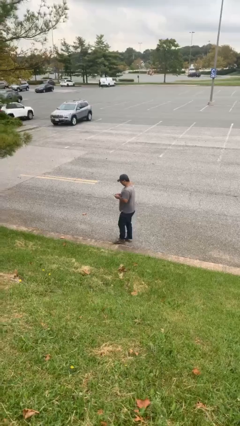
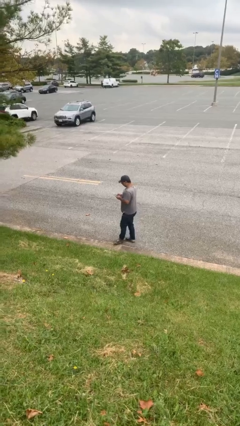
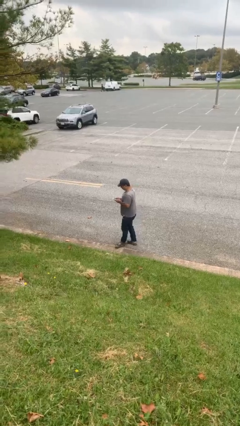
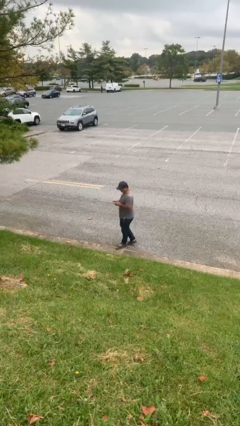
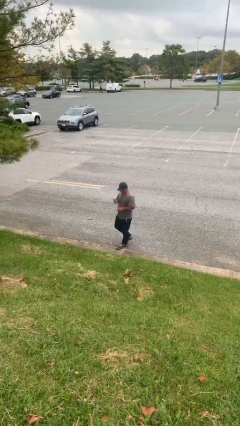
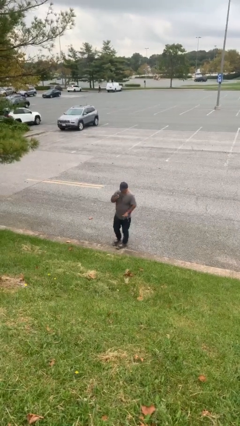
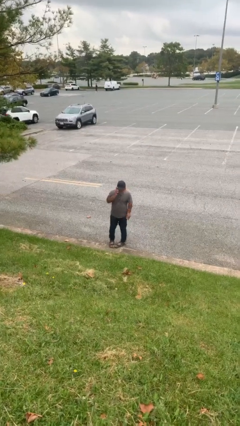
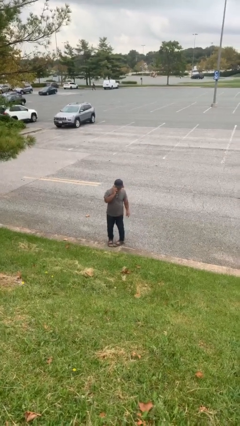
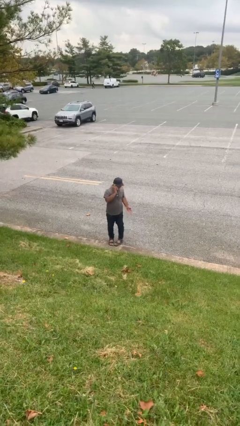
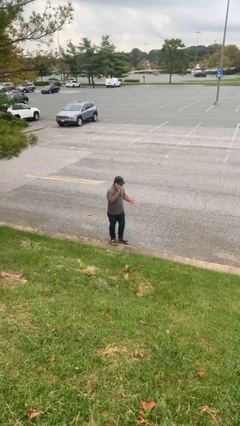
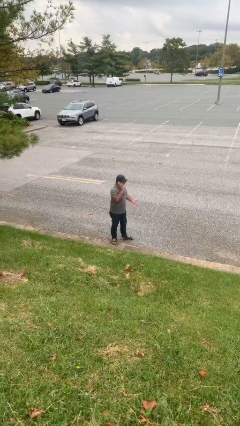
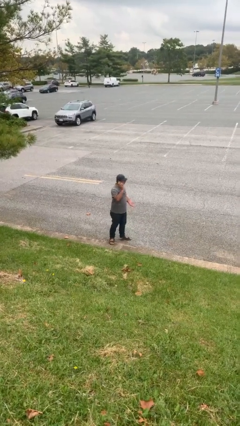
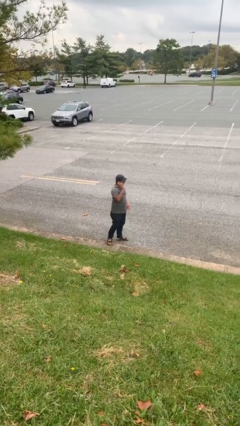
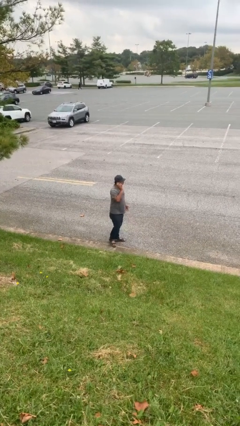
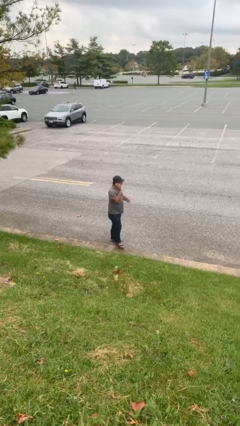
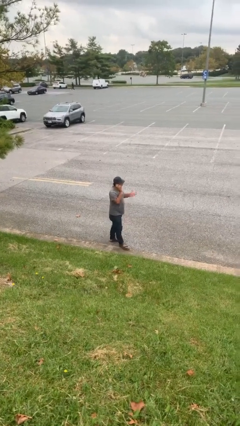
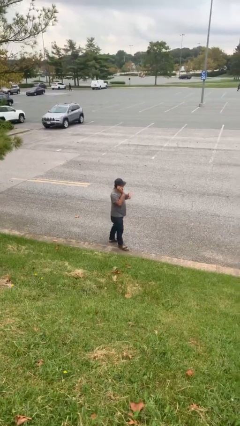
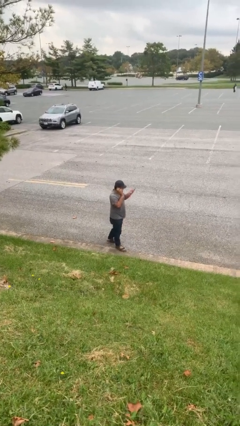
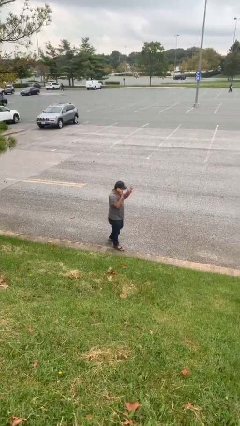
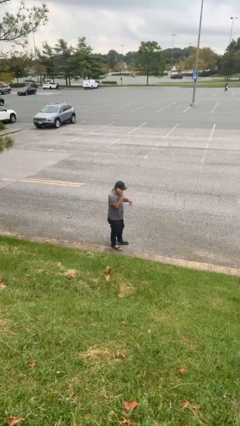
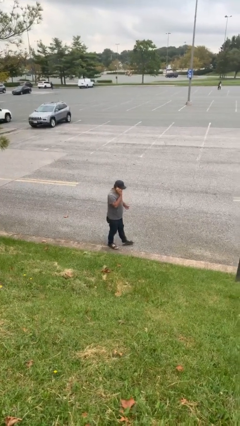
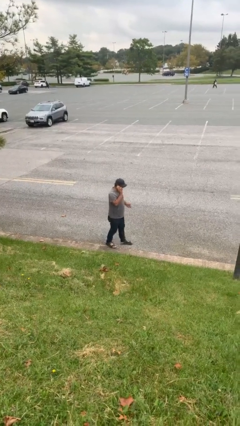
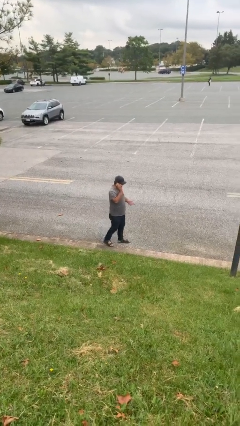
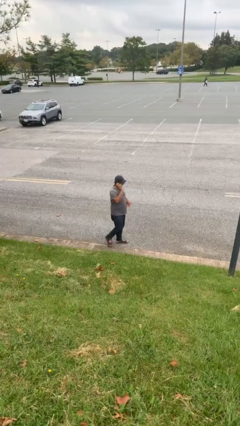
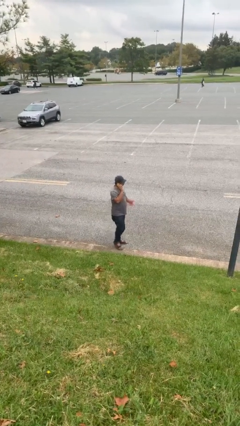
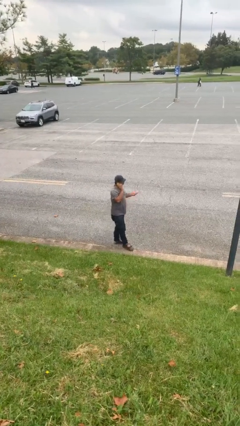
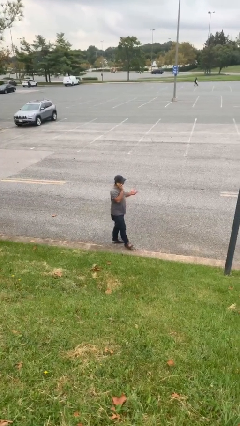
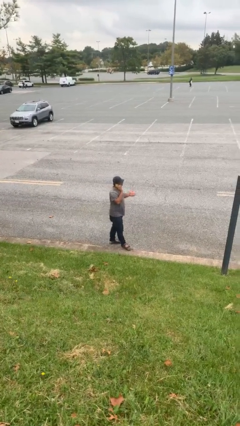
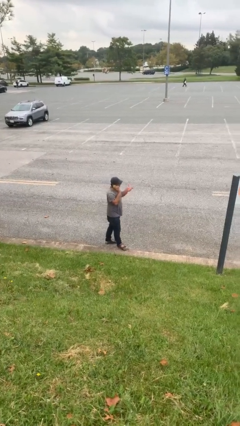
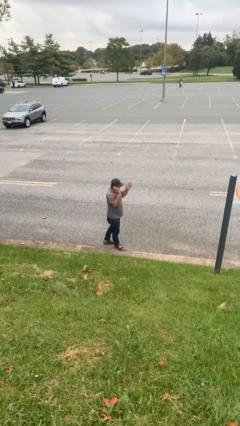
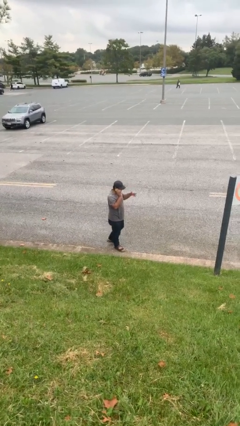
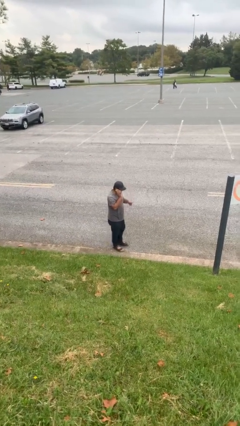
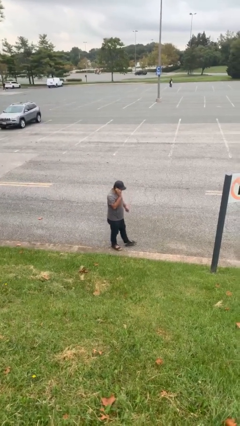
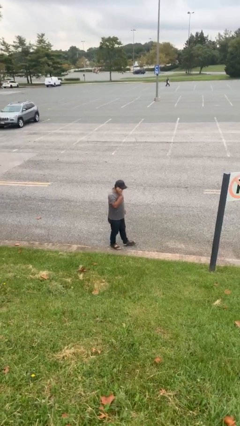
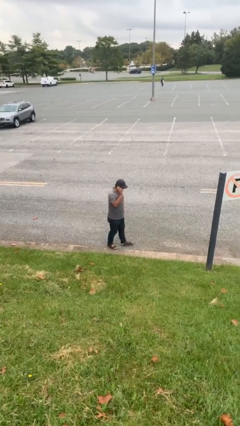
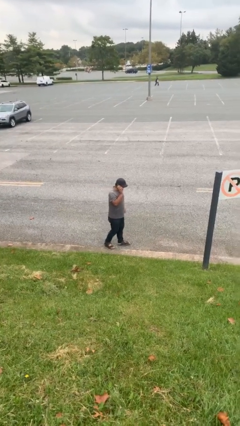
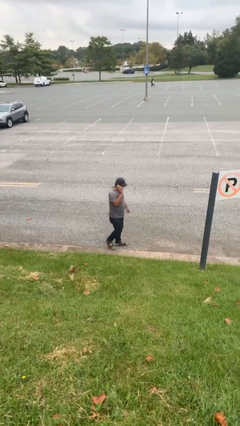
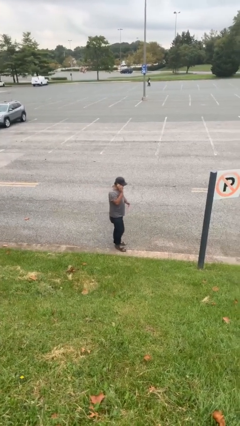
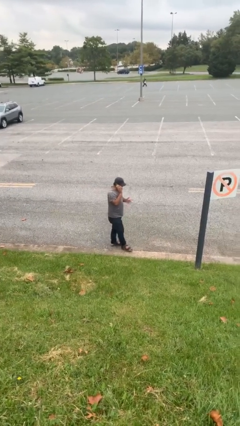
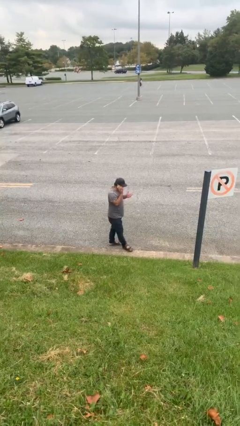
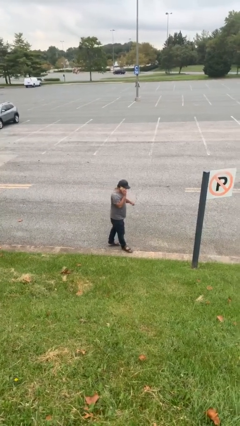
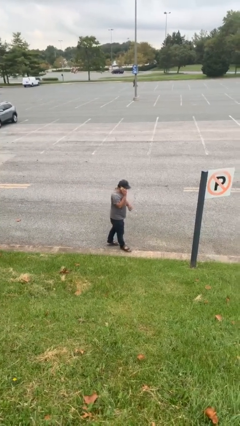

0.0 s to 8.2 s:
person talks on phone

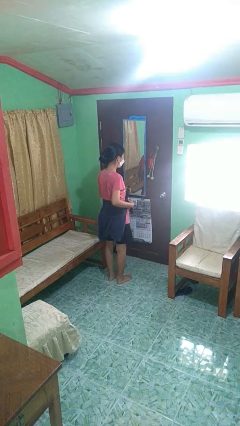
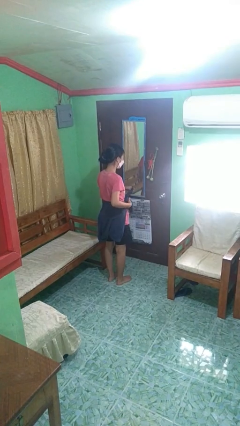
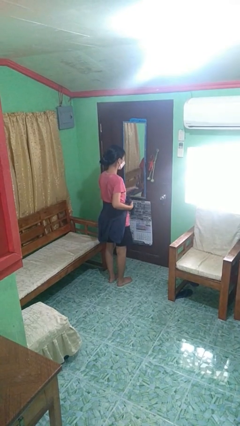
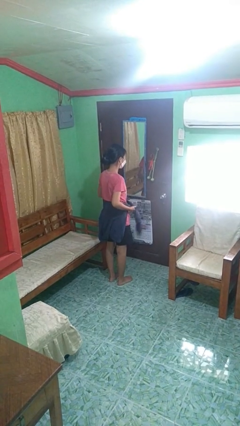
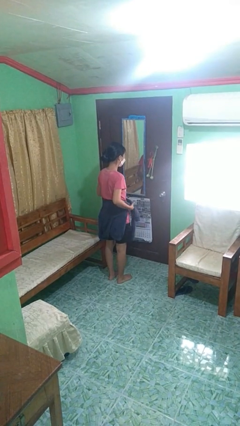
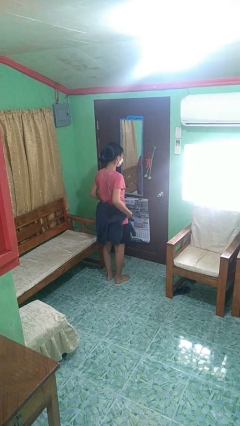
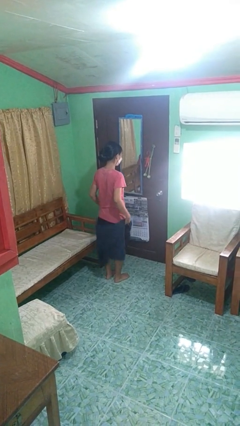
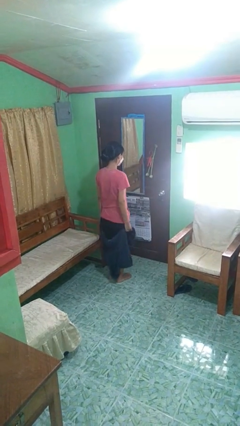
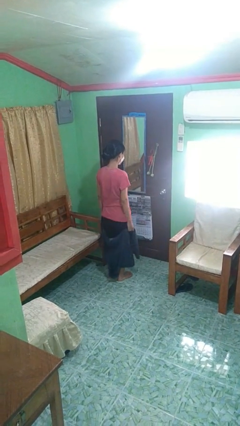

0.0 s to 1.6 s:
person unties jacket around waist

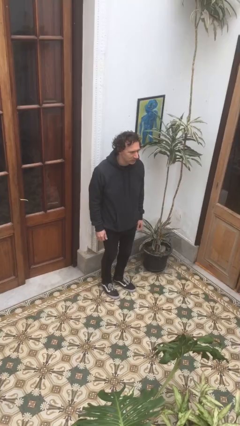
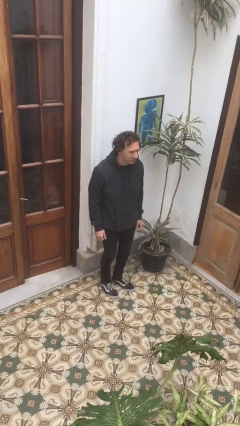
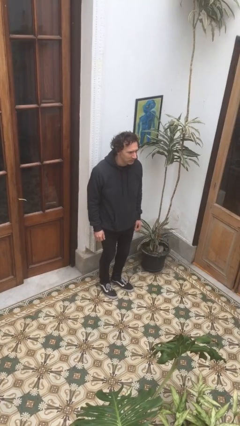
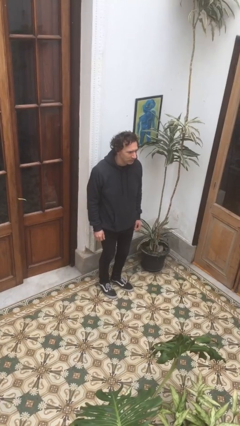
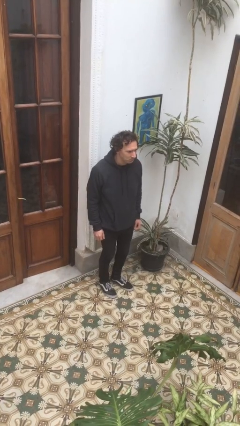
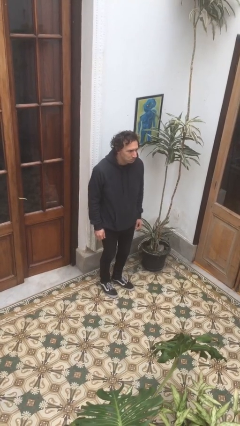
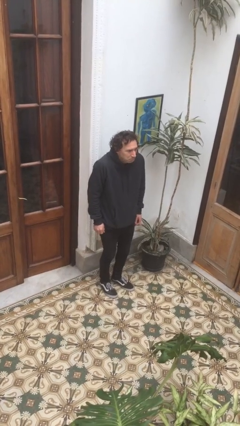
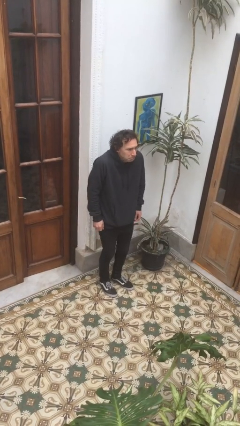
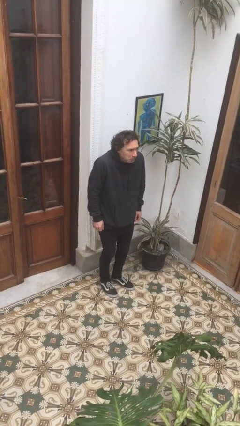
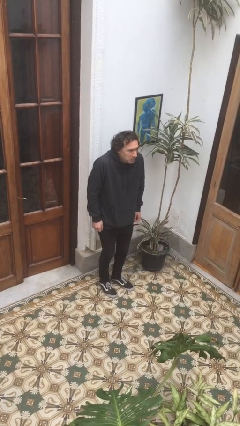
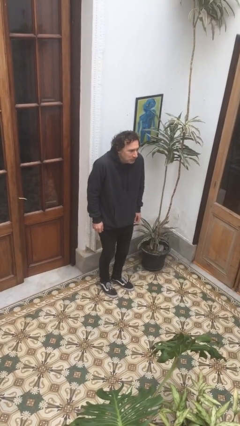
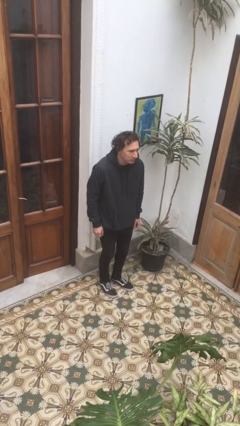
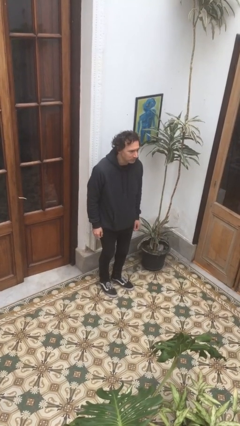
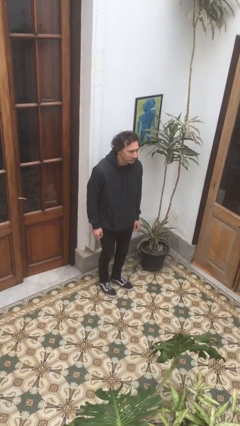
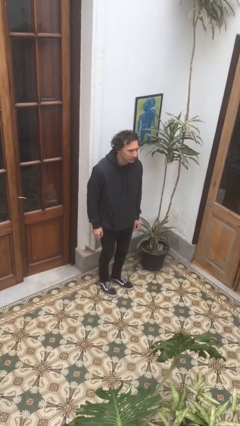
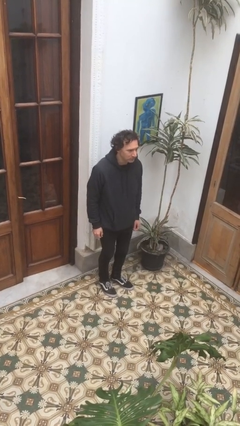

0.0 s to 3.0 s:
person shrugs

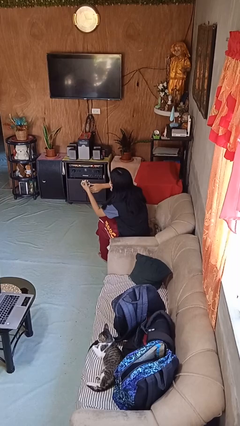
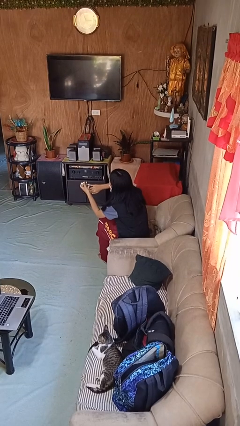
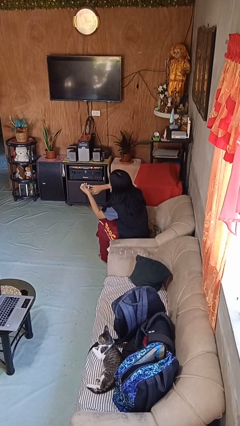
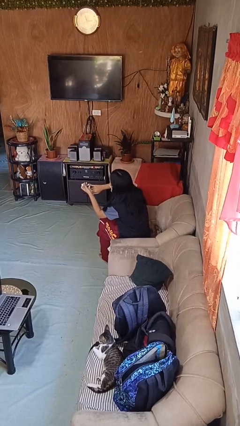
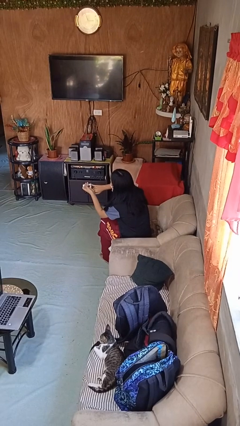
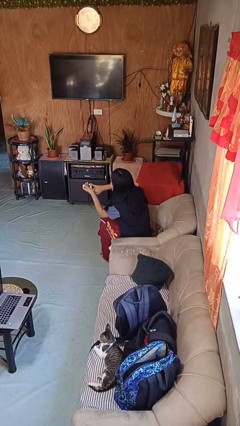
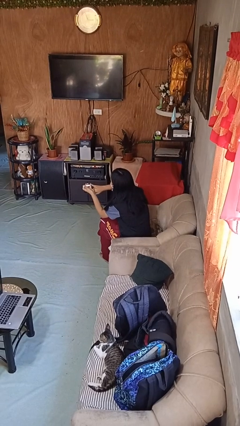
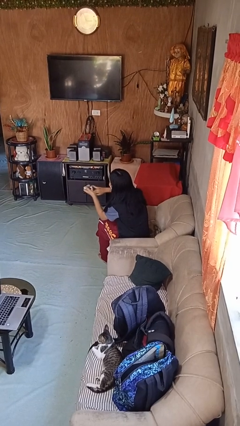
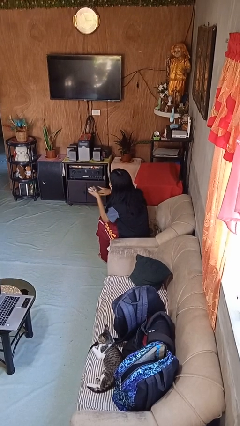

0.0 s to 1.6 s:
person clips fingernails

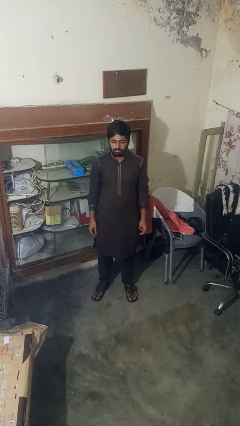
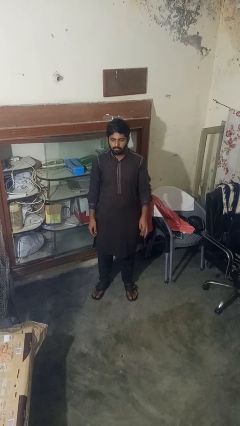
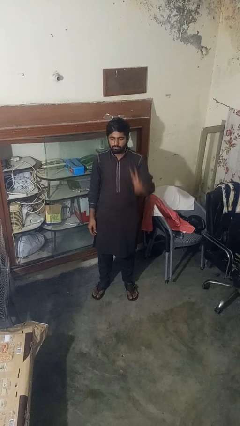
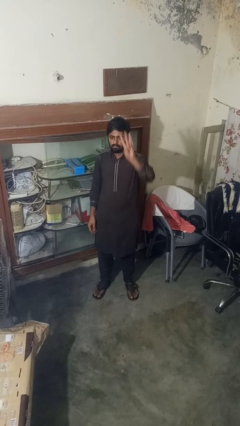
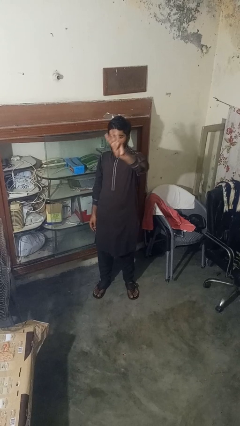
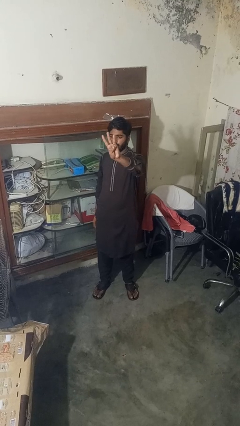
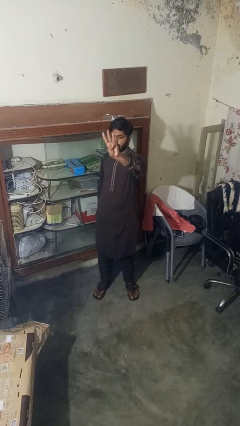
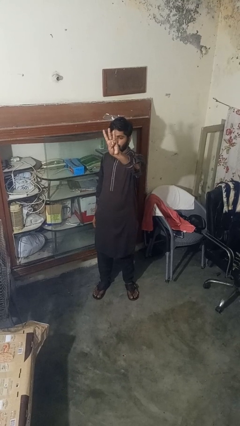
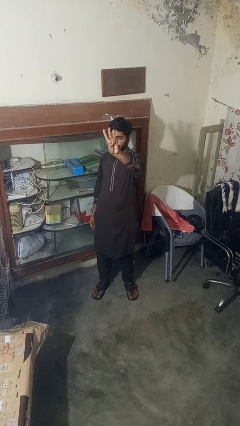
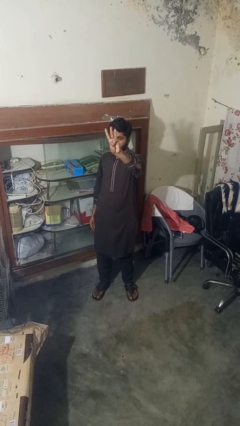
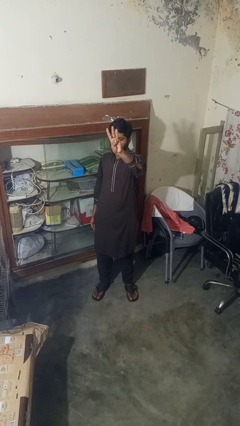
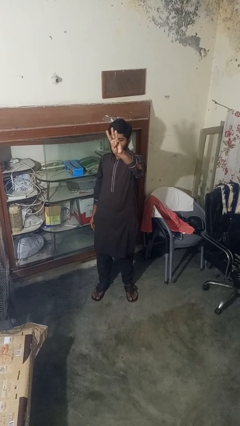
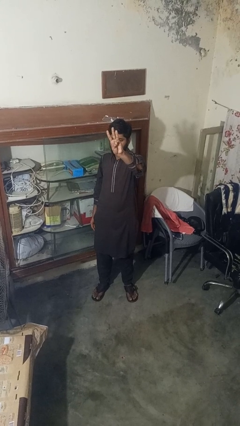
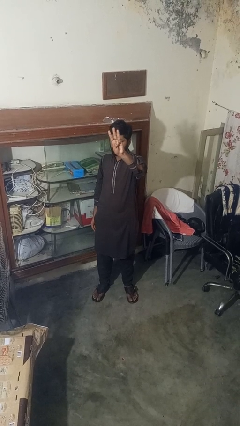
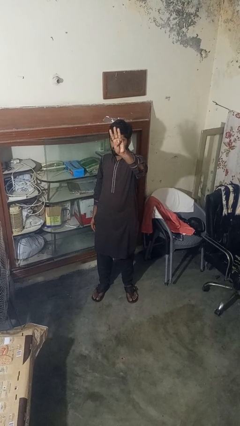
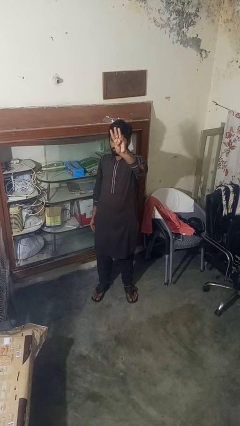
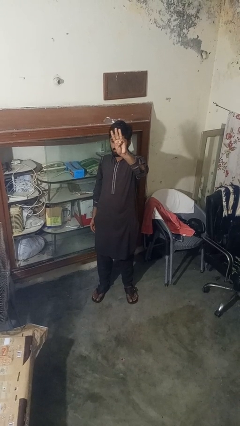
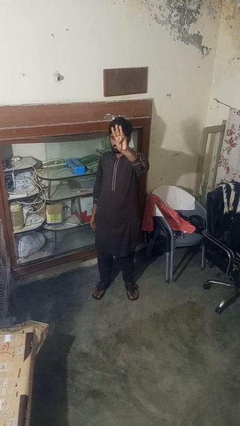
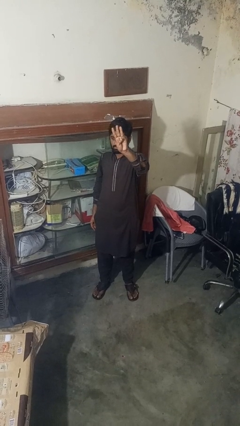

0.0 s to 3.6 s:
person gestures number three
